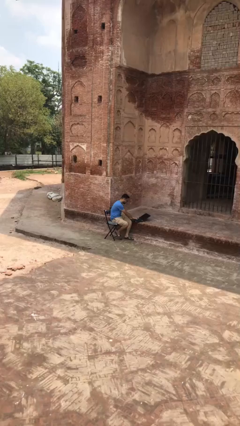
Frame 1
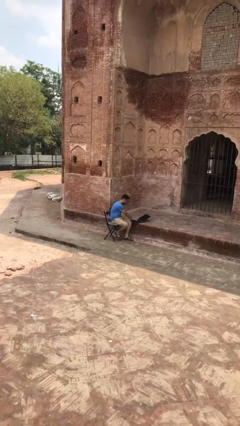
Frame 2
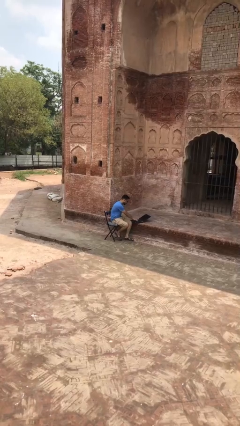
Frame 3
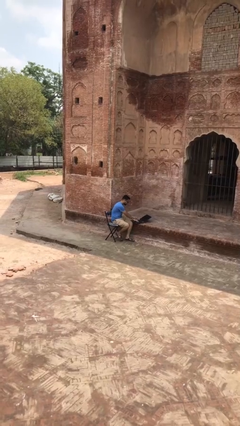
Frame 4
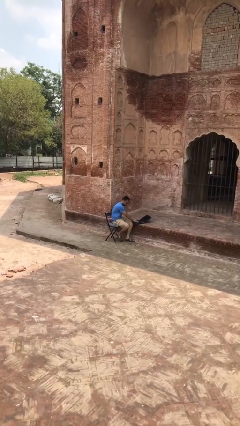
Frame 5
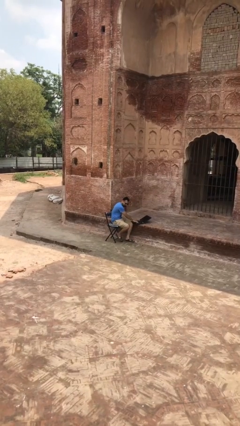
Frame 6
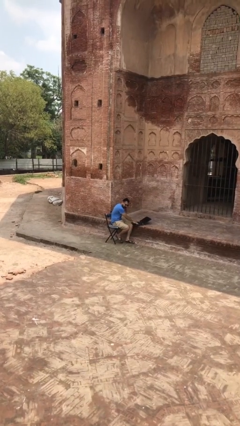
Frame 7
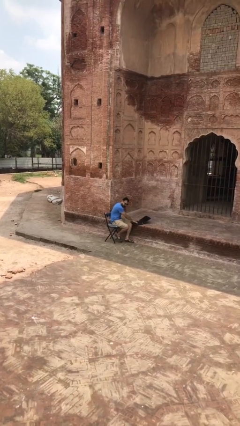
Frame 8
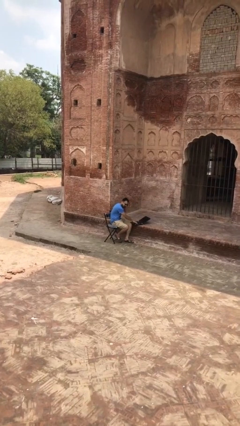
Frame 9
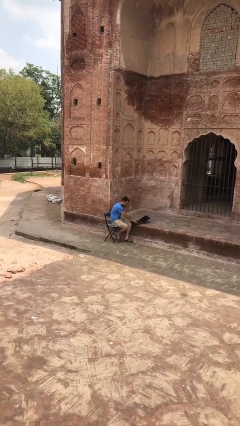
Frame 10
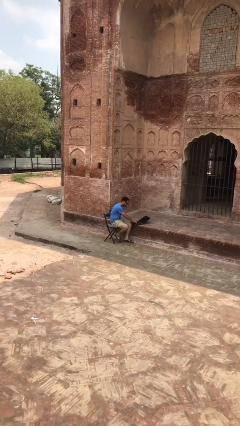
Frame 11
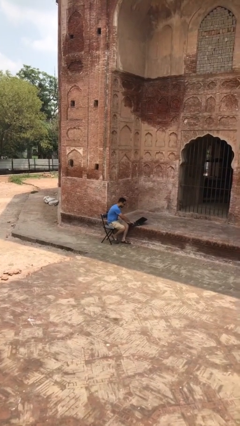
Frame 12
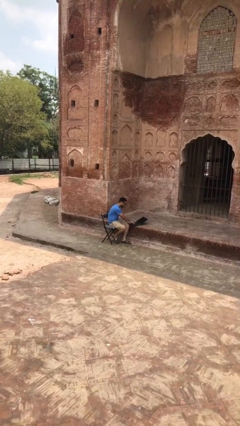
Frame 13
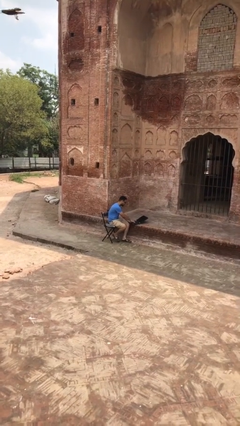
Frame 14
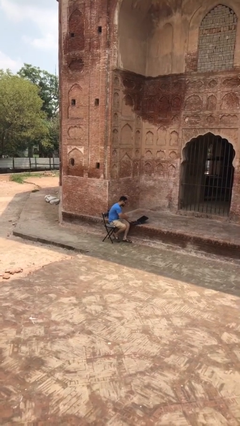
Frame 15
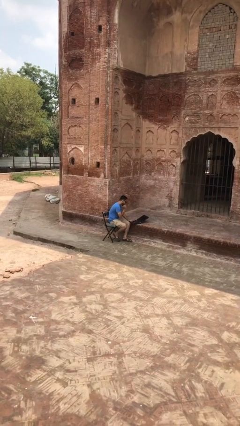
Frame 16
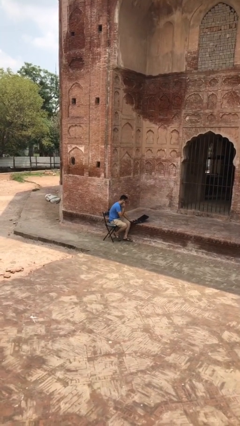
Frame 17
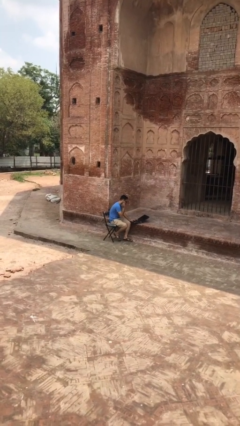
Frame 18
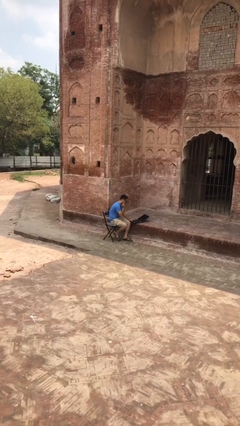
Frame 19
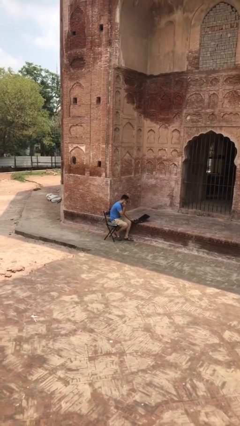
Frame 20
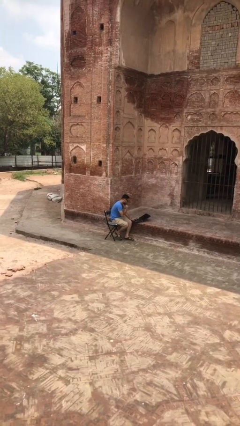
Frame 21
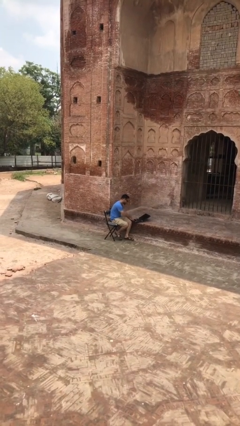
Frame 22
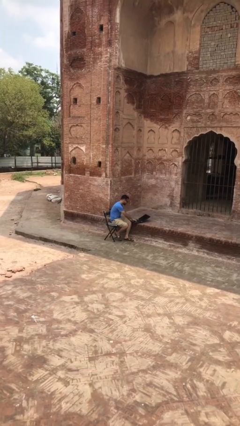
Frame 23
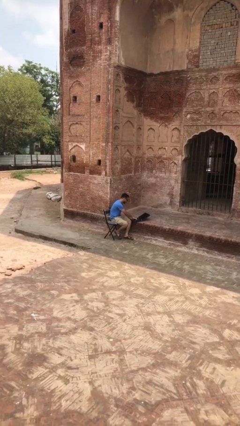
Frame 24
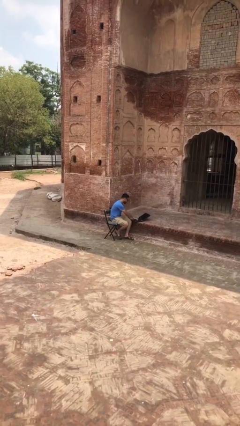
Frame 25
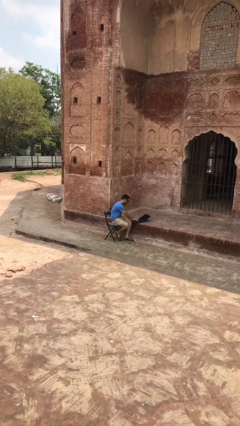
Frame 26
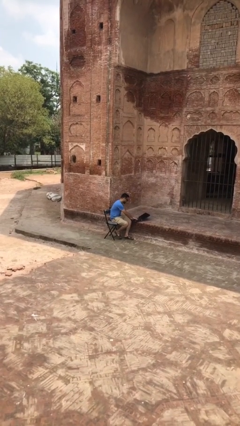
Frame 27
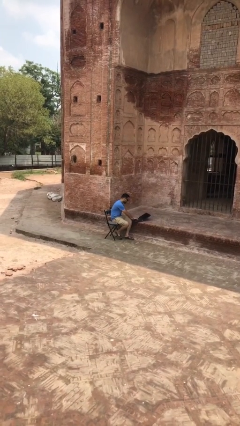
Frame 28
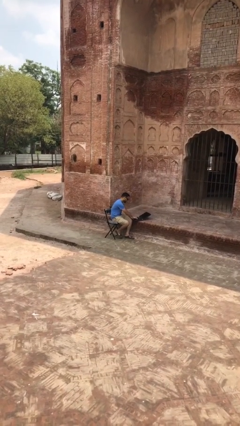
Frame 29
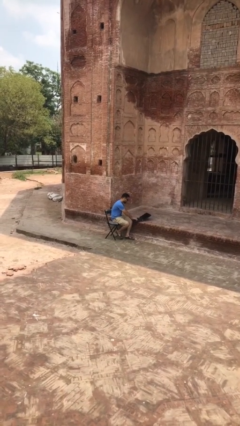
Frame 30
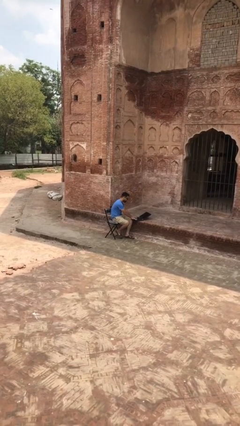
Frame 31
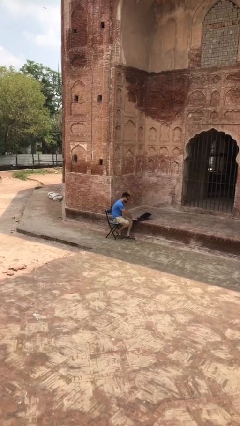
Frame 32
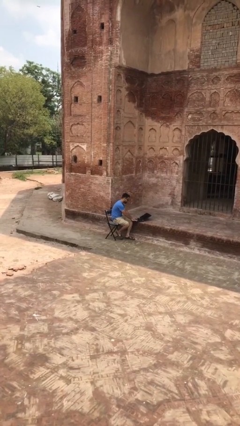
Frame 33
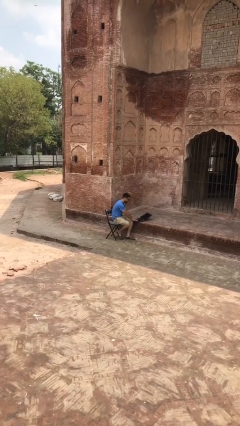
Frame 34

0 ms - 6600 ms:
person interacts with laptop

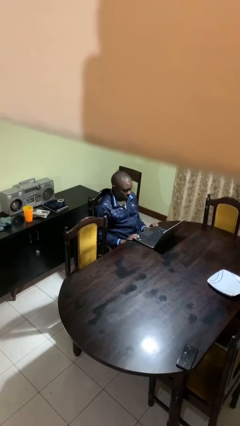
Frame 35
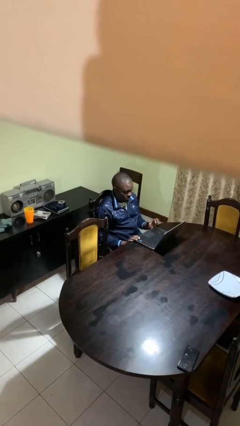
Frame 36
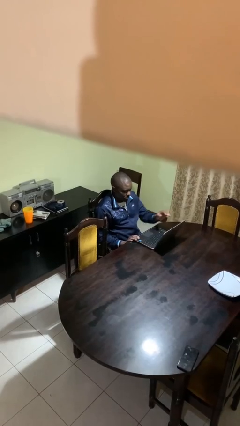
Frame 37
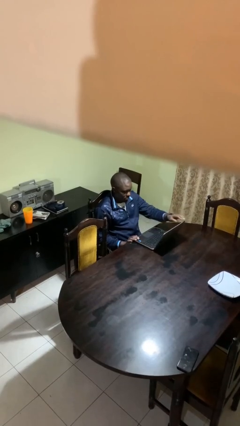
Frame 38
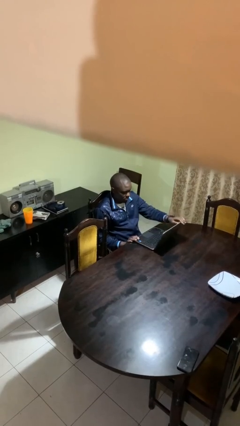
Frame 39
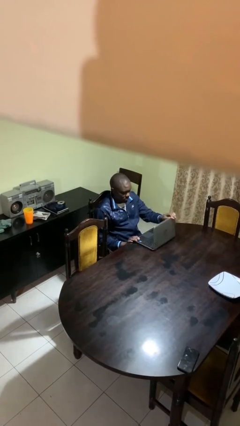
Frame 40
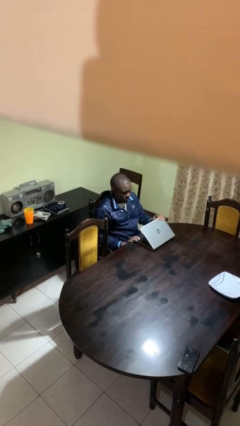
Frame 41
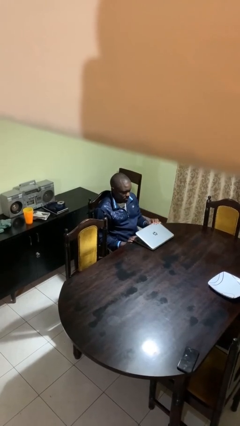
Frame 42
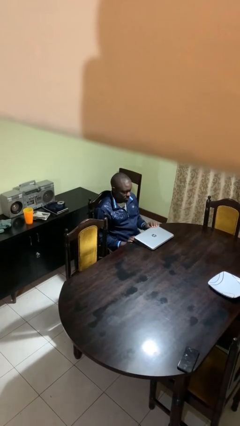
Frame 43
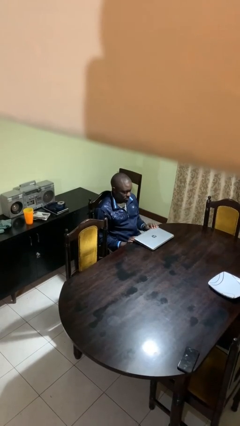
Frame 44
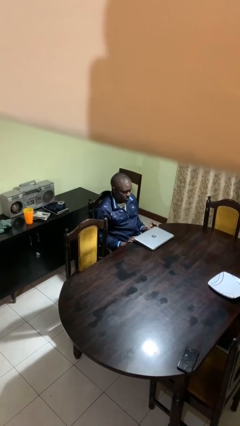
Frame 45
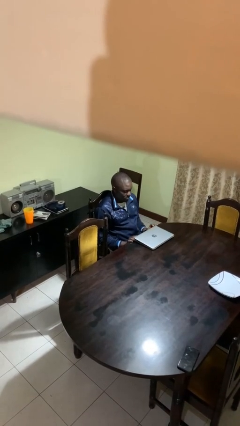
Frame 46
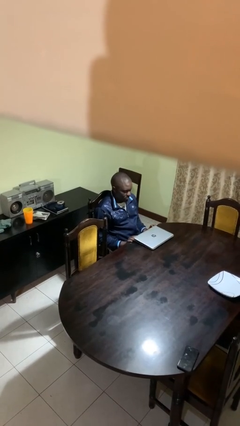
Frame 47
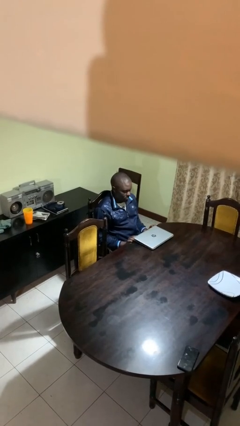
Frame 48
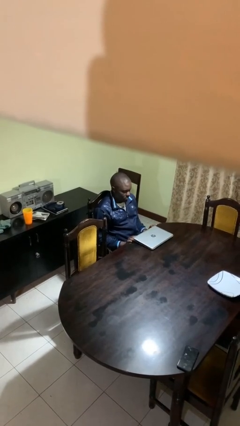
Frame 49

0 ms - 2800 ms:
person closes laptop

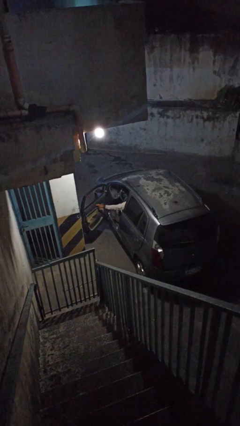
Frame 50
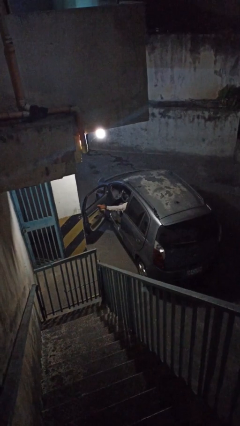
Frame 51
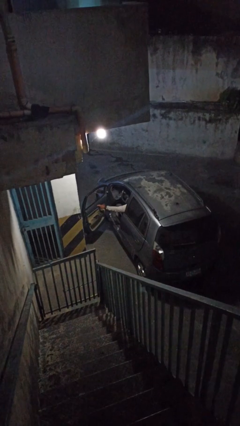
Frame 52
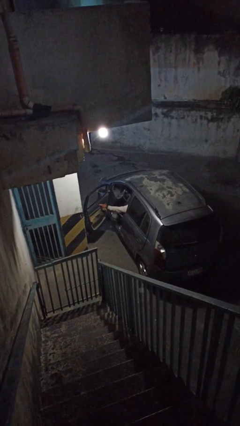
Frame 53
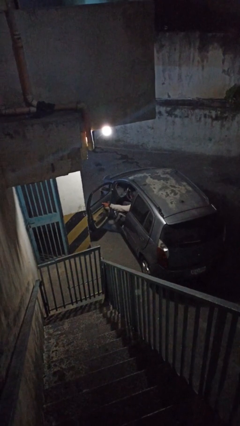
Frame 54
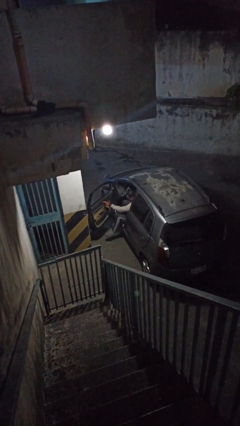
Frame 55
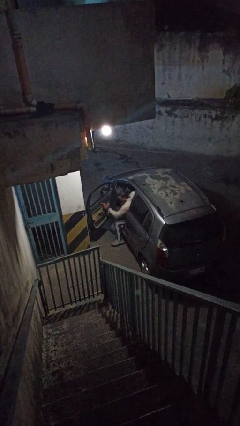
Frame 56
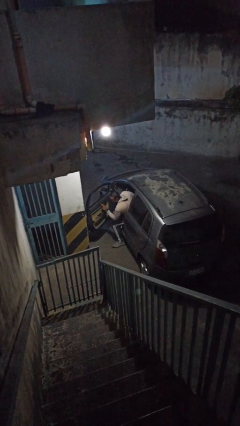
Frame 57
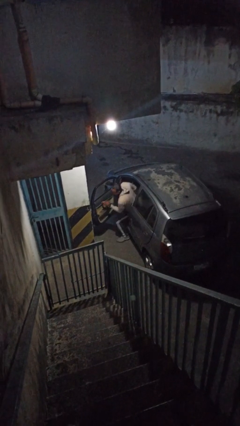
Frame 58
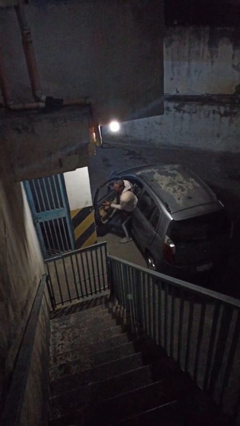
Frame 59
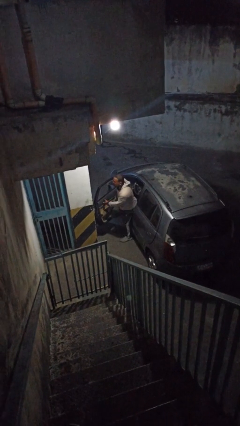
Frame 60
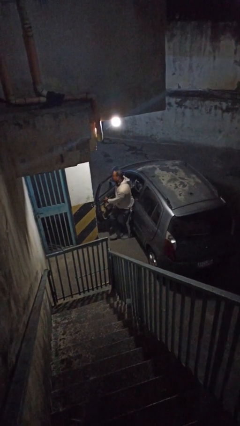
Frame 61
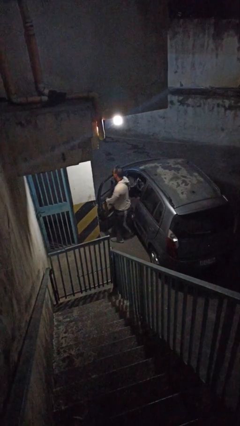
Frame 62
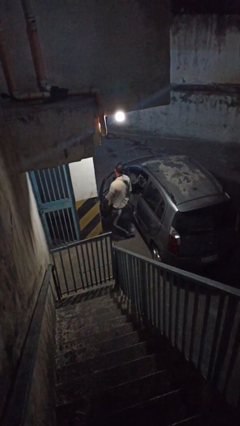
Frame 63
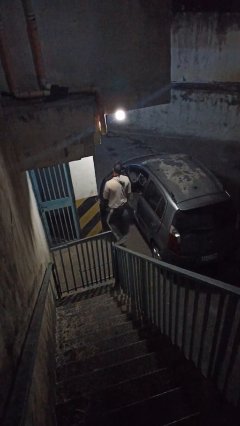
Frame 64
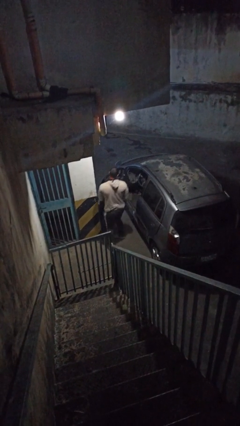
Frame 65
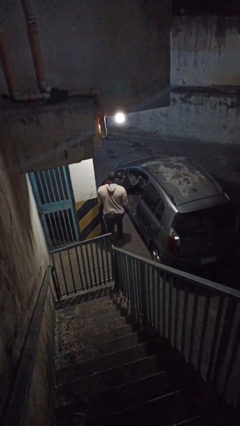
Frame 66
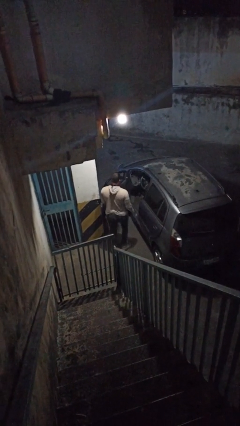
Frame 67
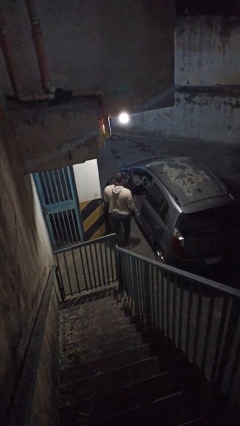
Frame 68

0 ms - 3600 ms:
person exits car

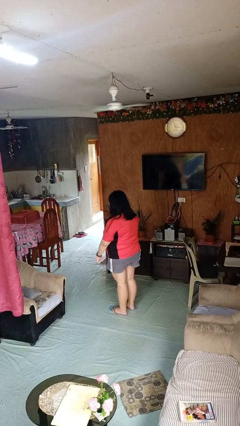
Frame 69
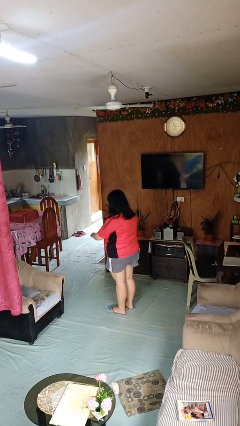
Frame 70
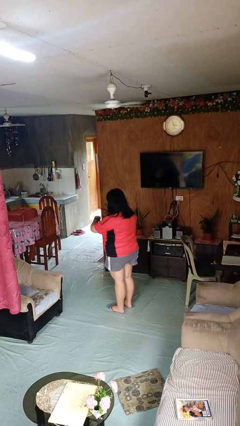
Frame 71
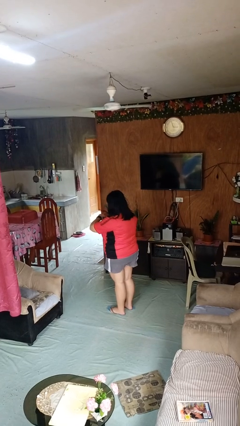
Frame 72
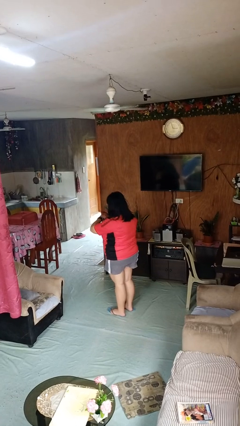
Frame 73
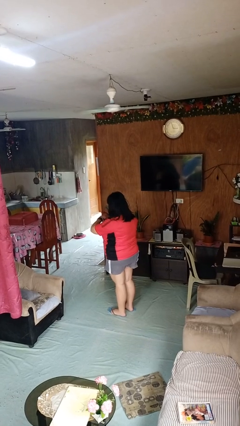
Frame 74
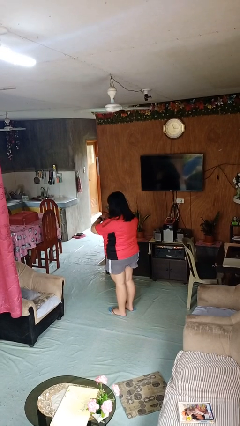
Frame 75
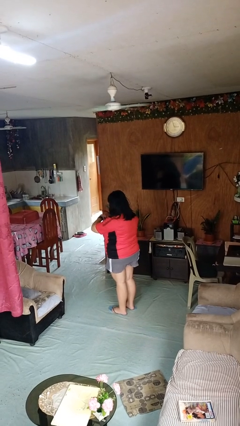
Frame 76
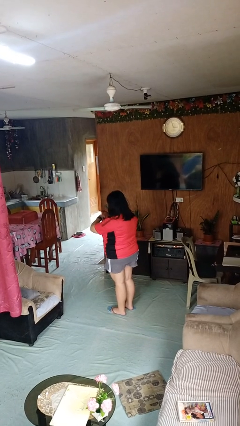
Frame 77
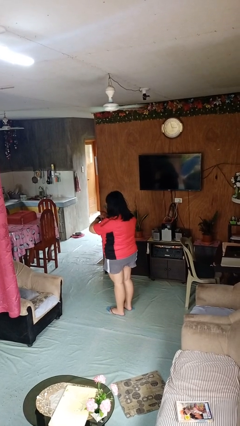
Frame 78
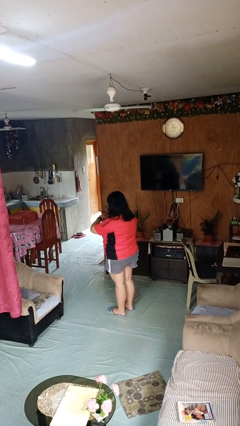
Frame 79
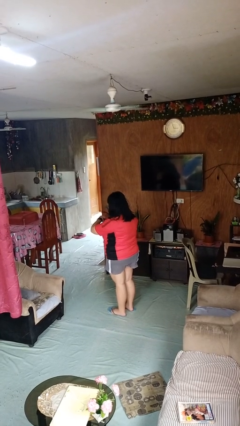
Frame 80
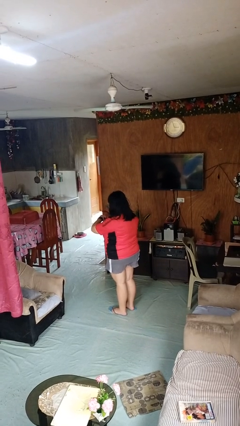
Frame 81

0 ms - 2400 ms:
person looks at wristwatch

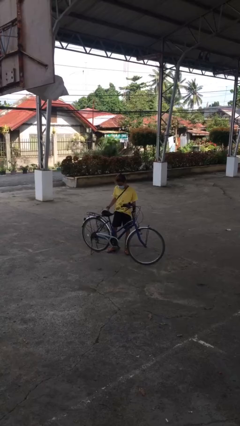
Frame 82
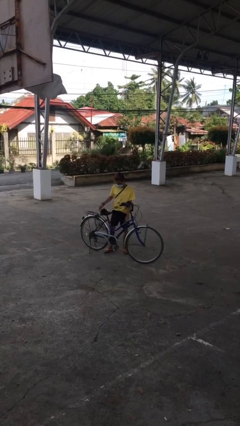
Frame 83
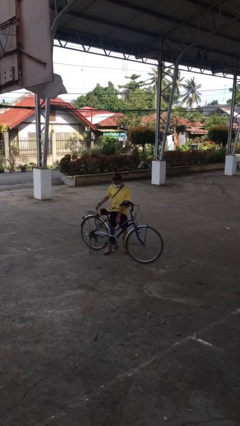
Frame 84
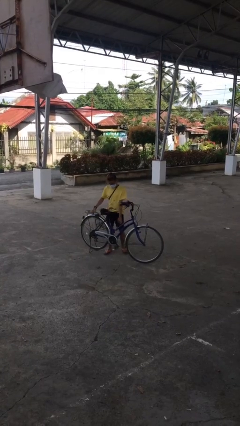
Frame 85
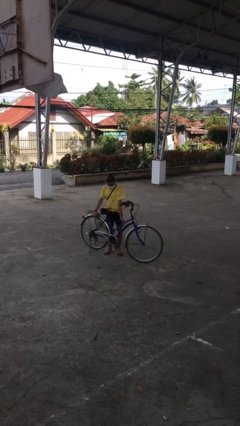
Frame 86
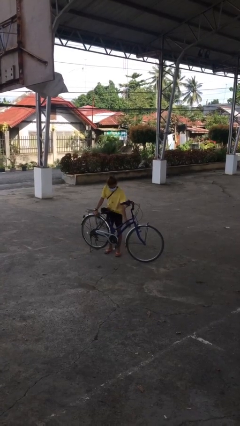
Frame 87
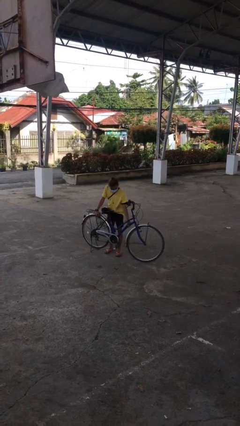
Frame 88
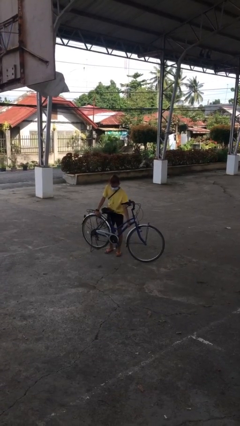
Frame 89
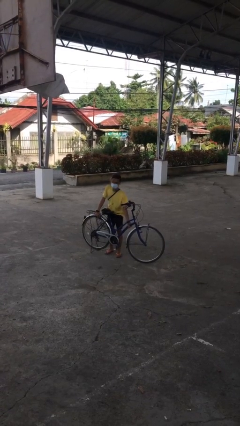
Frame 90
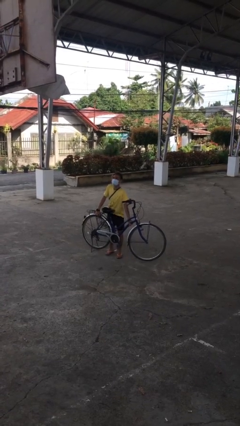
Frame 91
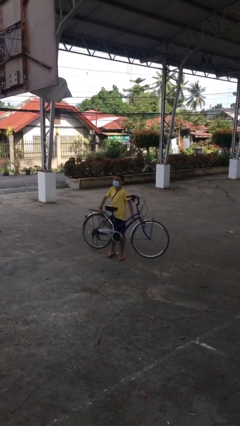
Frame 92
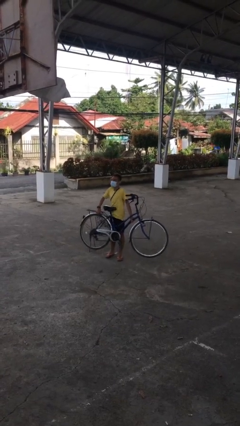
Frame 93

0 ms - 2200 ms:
person picks up object from floor
